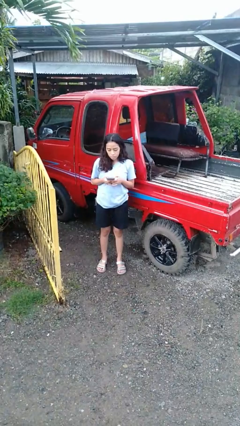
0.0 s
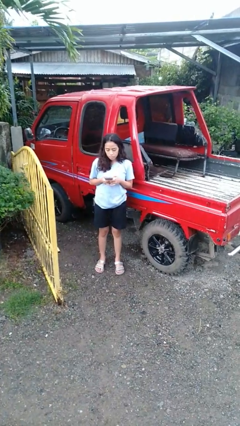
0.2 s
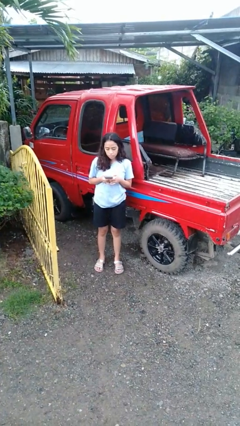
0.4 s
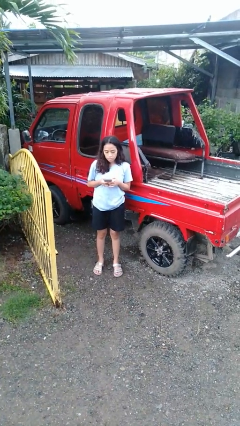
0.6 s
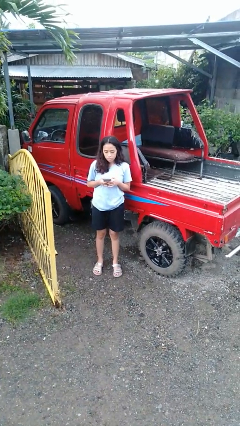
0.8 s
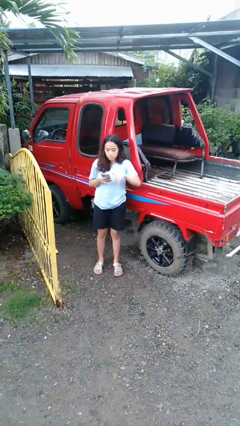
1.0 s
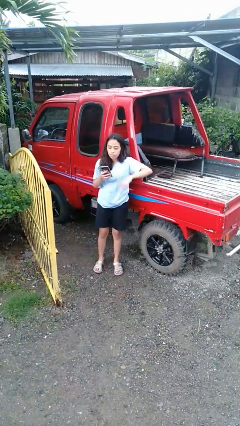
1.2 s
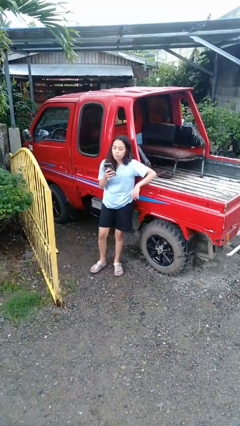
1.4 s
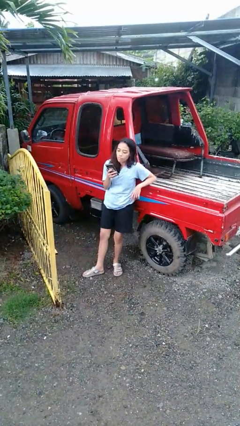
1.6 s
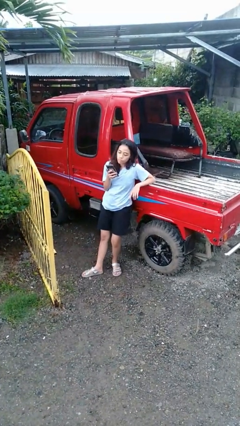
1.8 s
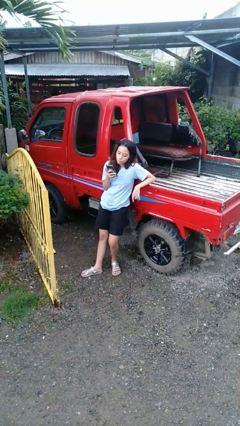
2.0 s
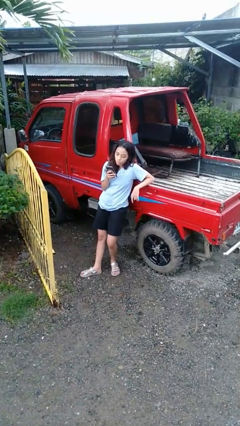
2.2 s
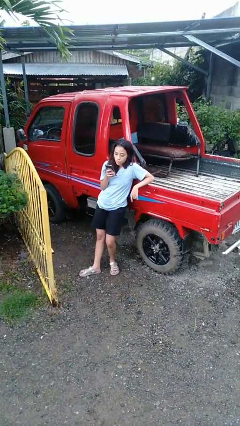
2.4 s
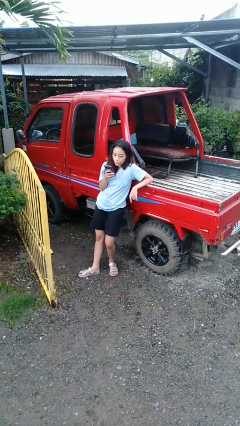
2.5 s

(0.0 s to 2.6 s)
person leans against car

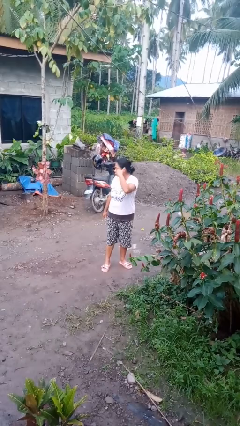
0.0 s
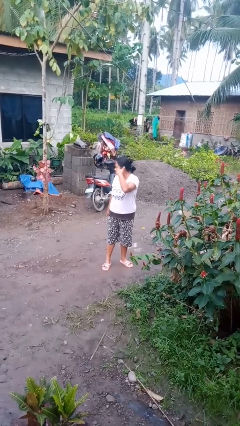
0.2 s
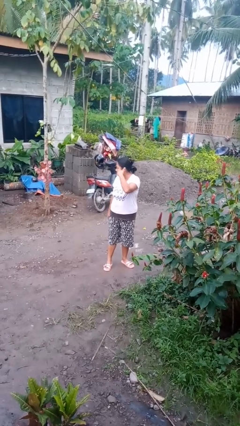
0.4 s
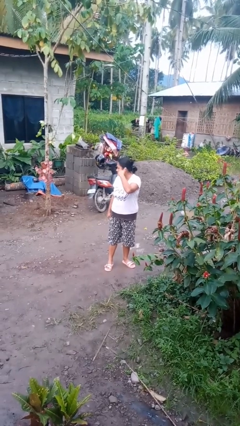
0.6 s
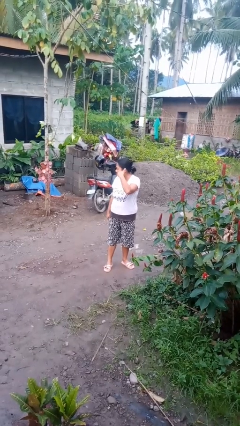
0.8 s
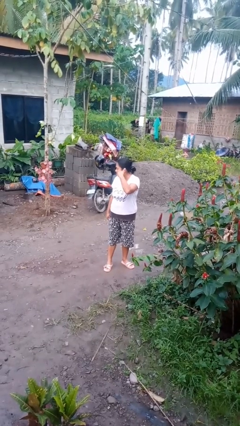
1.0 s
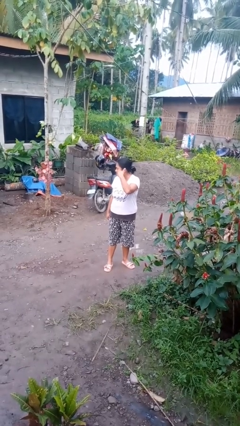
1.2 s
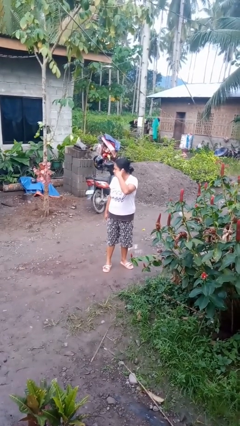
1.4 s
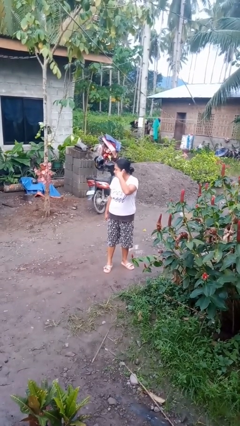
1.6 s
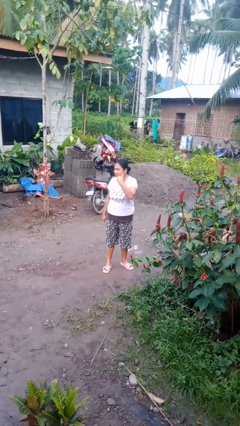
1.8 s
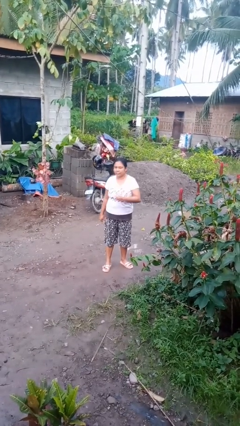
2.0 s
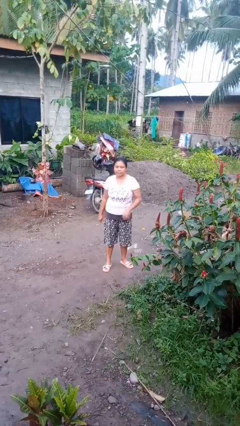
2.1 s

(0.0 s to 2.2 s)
person gestures call me

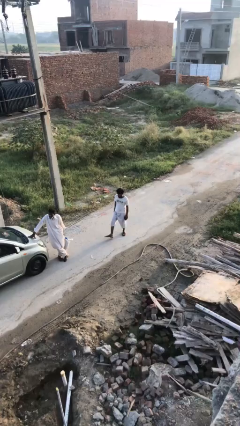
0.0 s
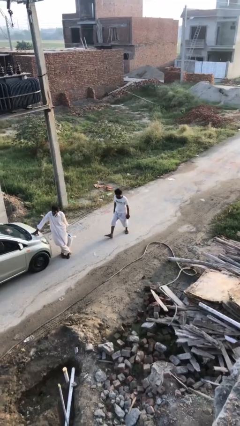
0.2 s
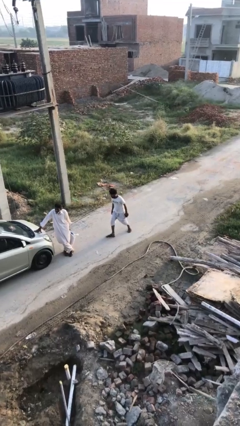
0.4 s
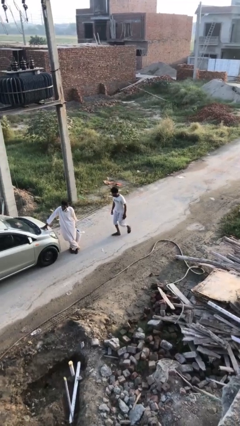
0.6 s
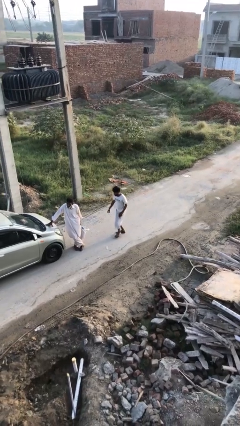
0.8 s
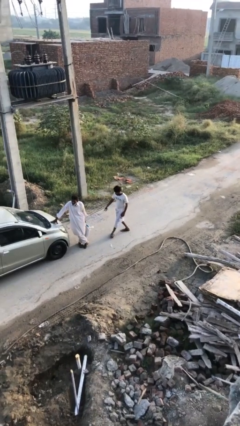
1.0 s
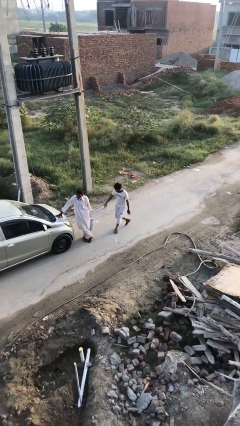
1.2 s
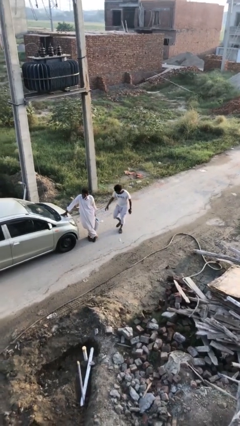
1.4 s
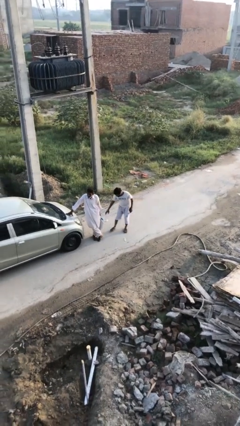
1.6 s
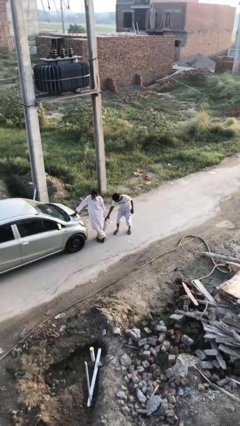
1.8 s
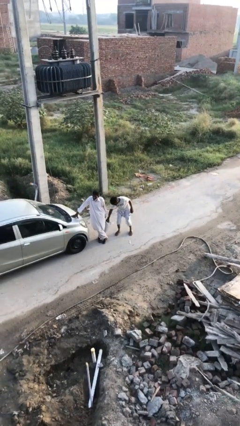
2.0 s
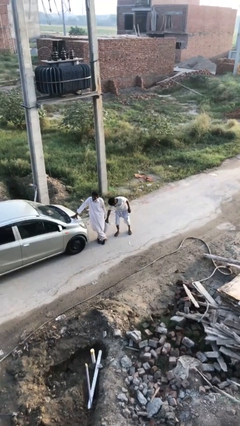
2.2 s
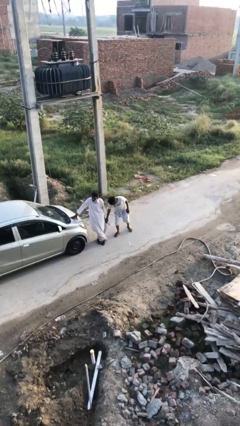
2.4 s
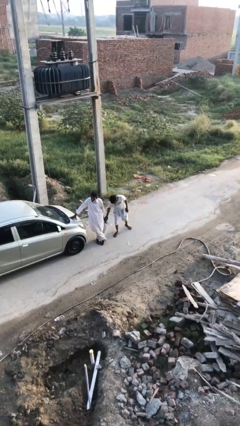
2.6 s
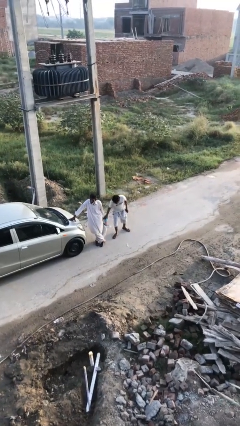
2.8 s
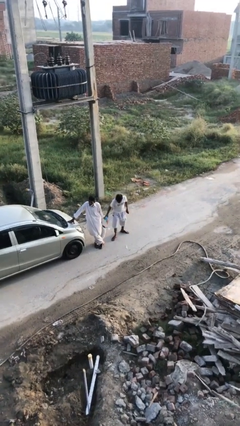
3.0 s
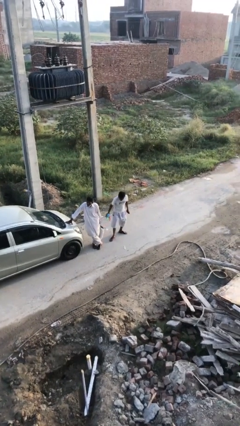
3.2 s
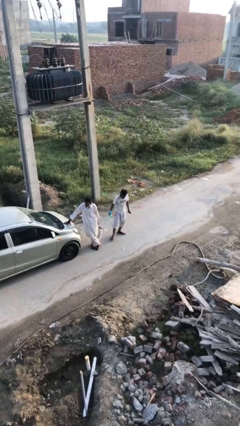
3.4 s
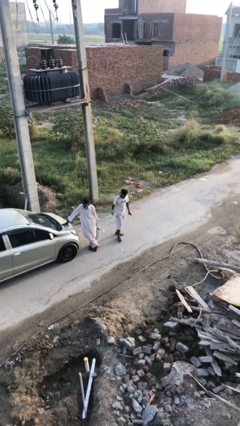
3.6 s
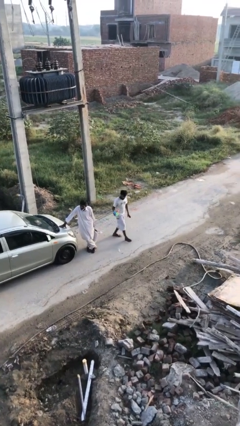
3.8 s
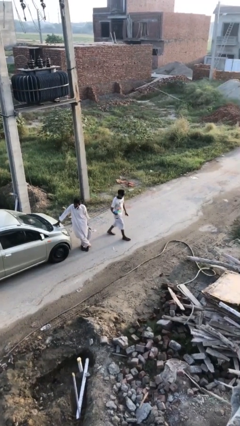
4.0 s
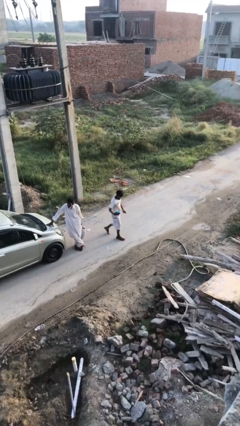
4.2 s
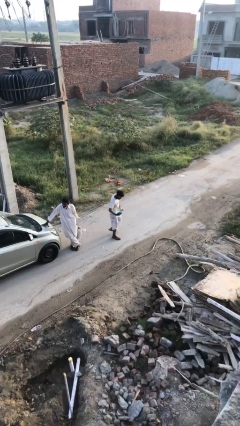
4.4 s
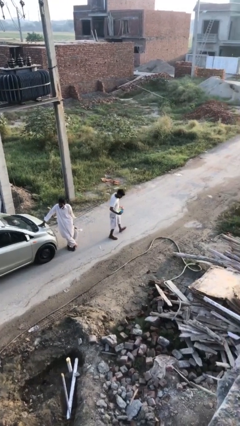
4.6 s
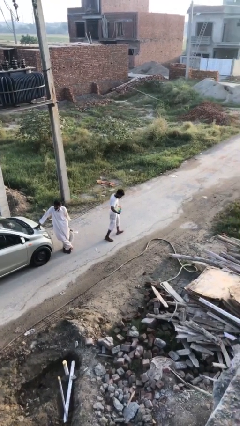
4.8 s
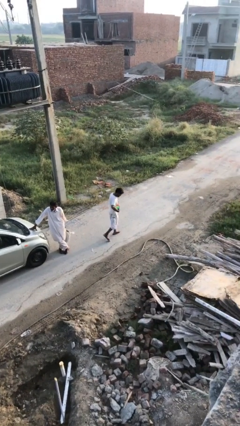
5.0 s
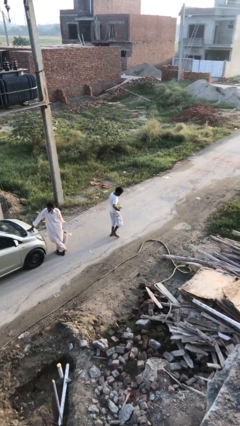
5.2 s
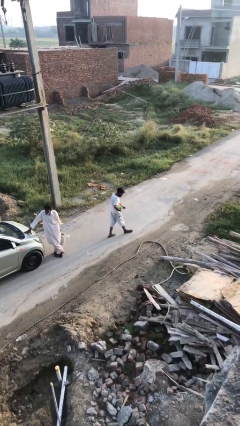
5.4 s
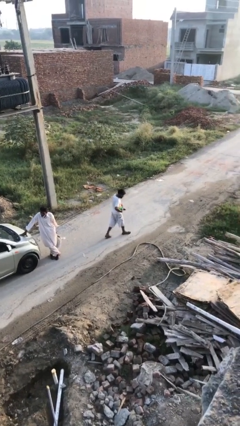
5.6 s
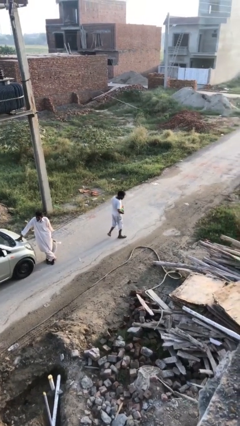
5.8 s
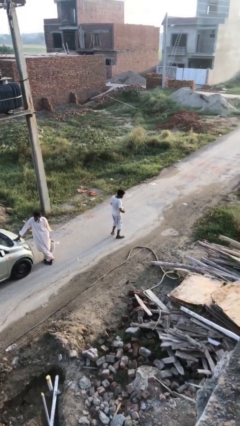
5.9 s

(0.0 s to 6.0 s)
person steals object from person

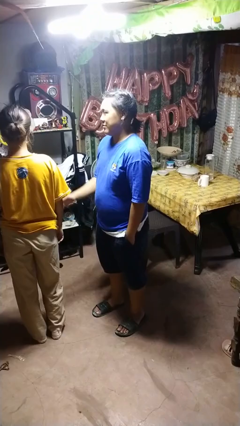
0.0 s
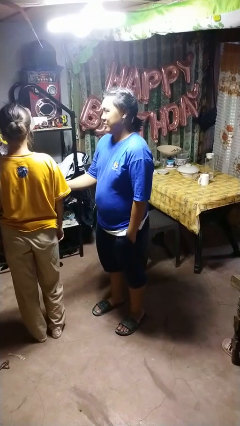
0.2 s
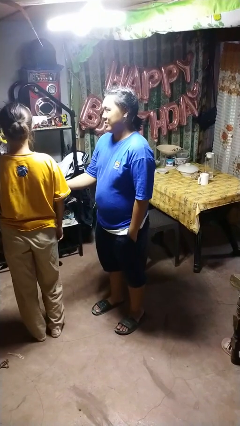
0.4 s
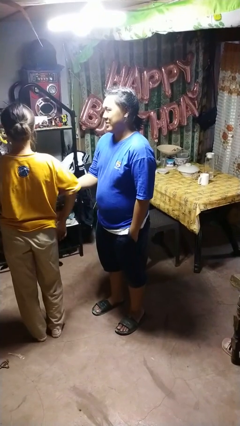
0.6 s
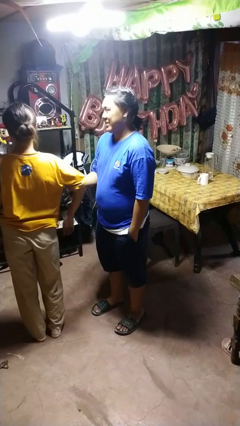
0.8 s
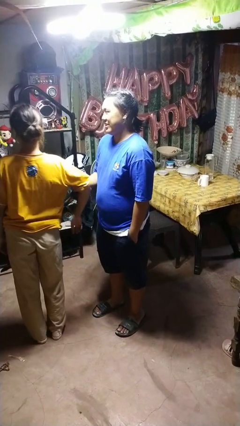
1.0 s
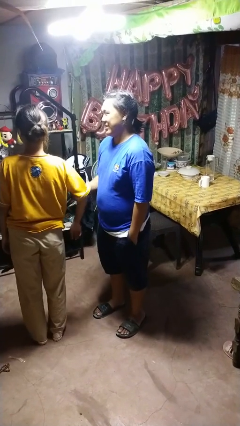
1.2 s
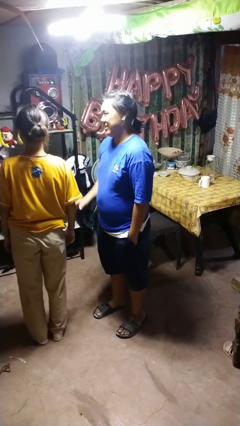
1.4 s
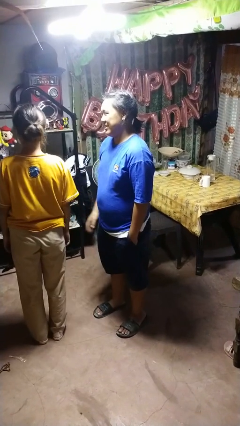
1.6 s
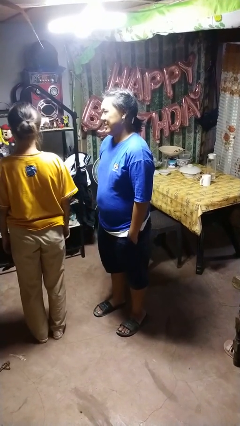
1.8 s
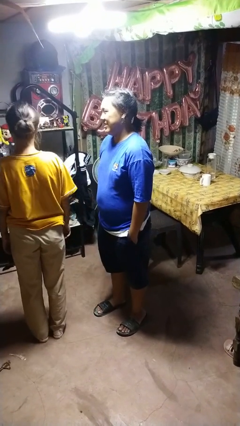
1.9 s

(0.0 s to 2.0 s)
person grabs person by bicep

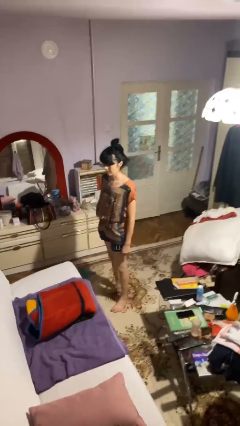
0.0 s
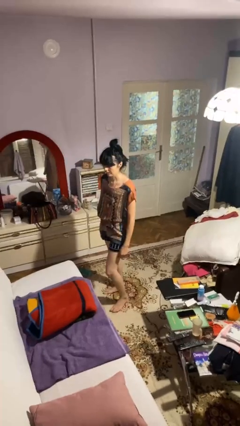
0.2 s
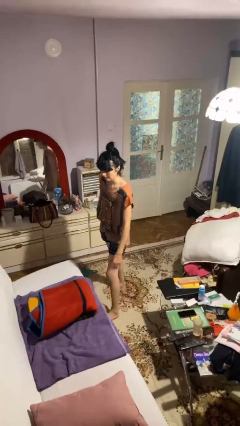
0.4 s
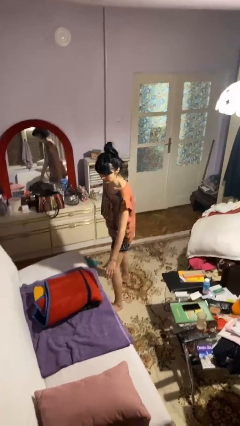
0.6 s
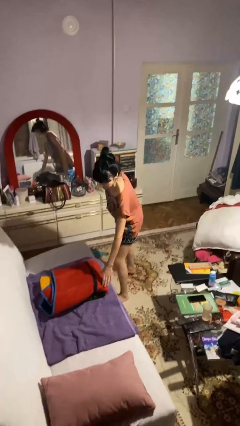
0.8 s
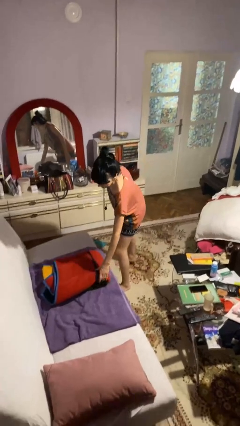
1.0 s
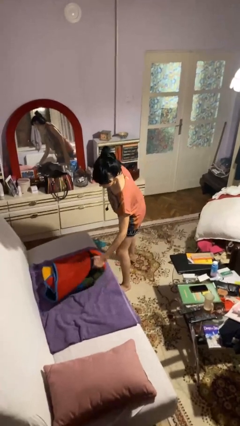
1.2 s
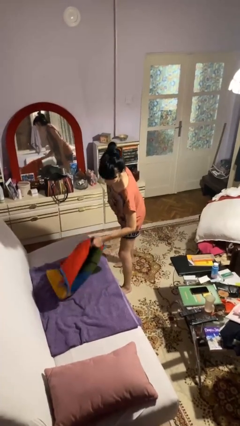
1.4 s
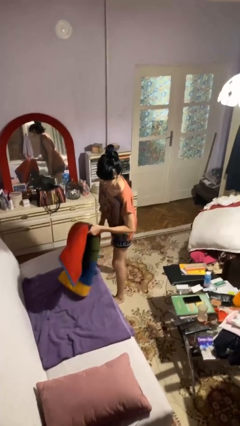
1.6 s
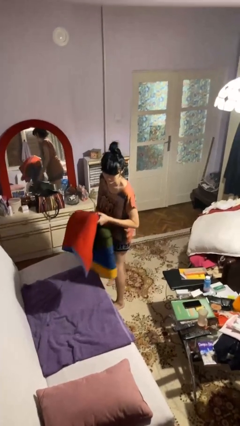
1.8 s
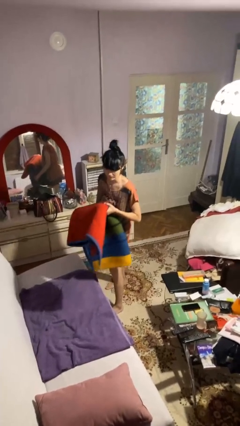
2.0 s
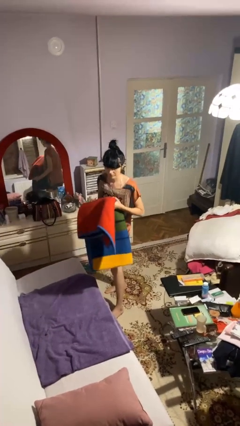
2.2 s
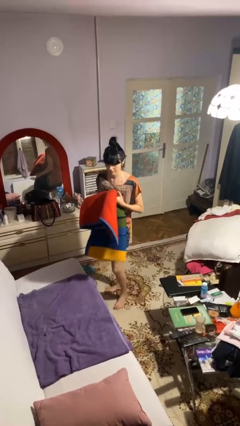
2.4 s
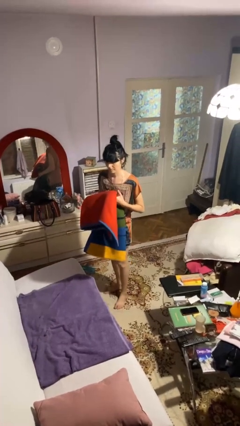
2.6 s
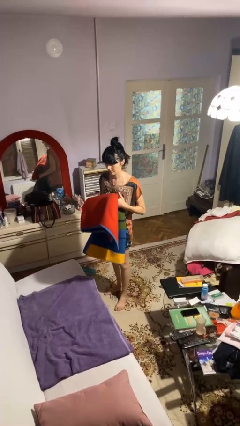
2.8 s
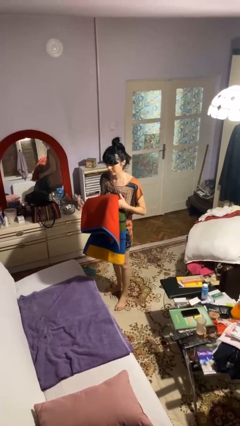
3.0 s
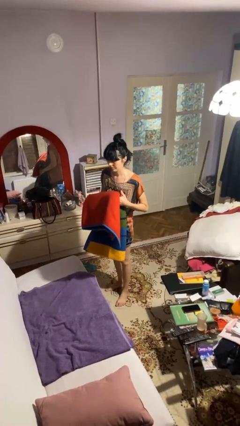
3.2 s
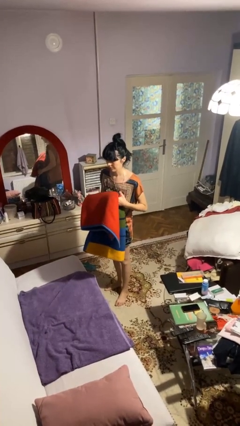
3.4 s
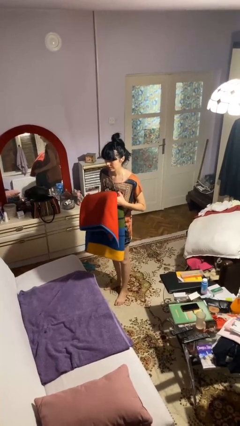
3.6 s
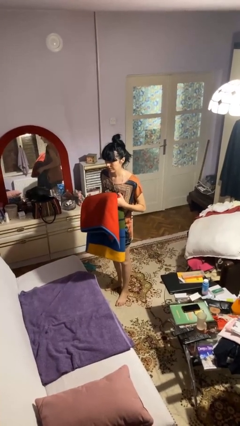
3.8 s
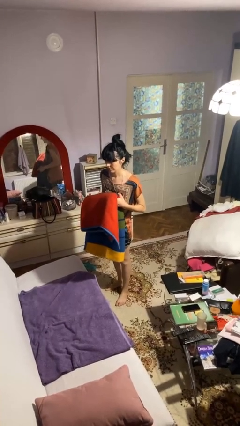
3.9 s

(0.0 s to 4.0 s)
person picks up object from couch

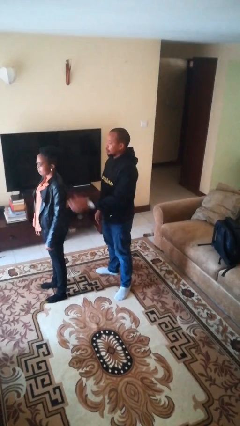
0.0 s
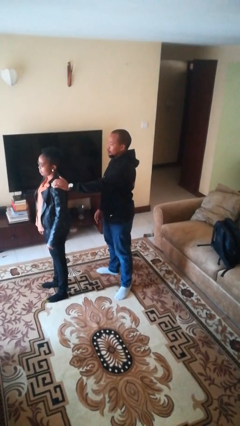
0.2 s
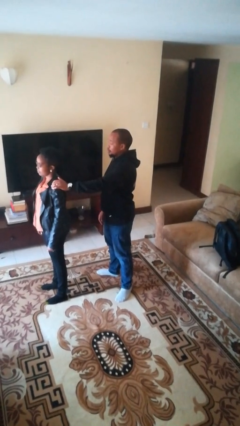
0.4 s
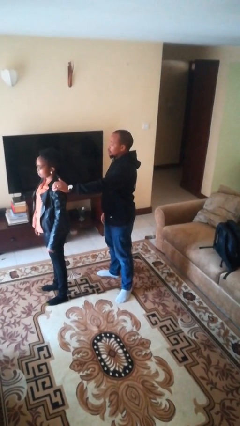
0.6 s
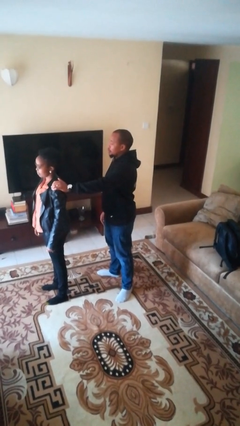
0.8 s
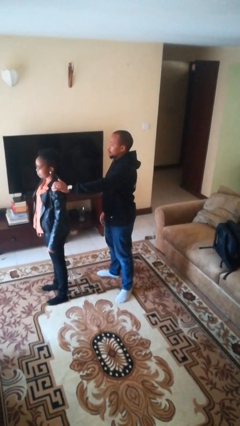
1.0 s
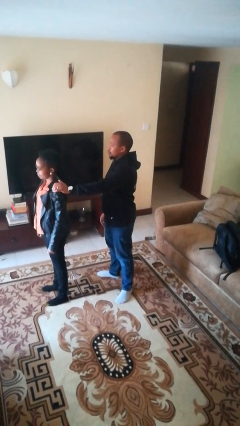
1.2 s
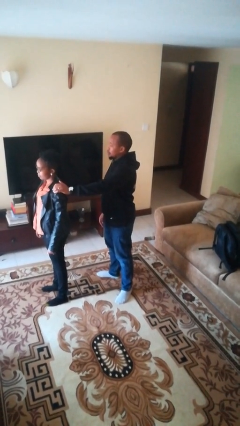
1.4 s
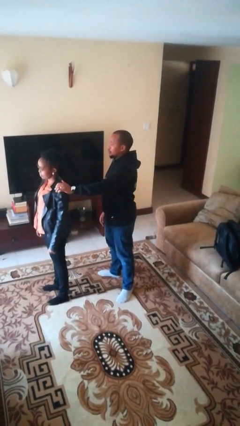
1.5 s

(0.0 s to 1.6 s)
person grabs person by shoulder
